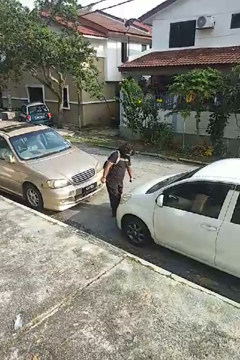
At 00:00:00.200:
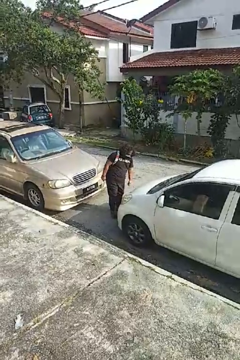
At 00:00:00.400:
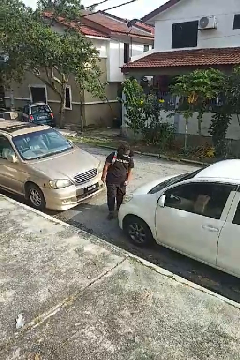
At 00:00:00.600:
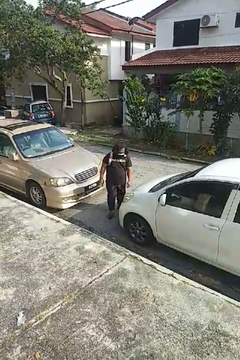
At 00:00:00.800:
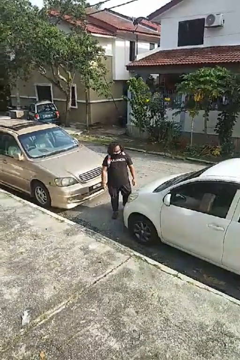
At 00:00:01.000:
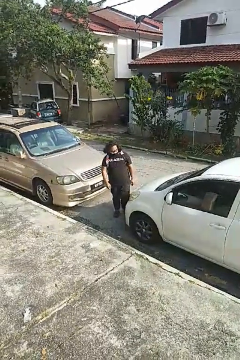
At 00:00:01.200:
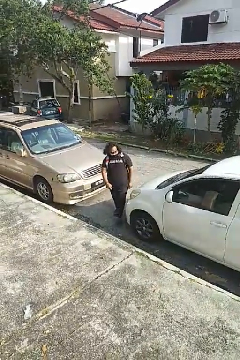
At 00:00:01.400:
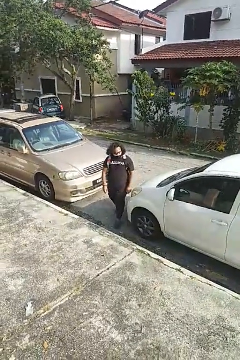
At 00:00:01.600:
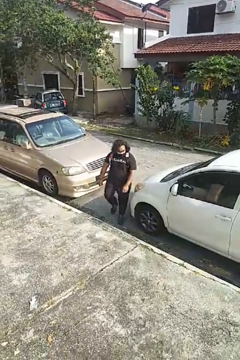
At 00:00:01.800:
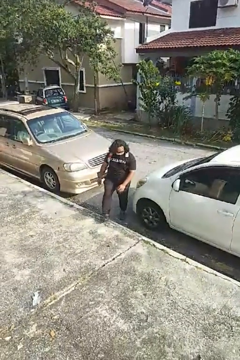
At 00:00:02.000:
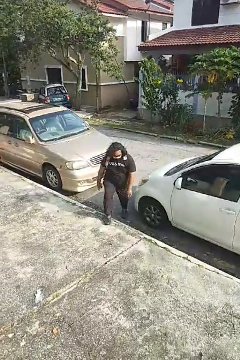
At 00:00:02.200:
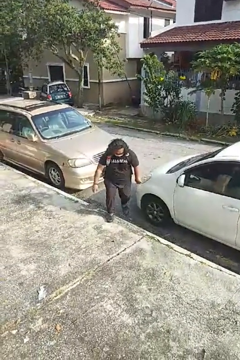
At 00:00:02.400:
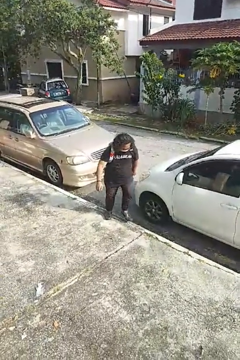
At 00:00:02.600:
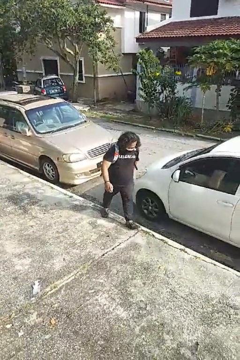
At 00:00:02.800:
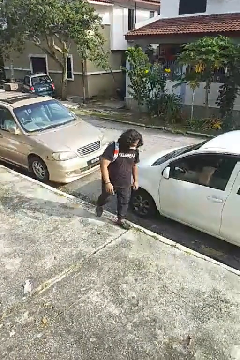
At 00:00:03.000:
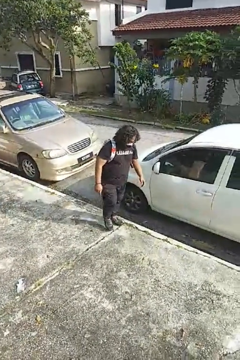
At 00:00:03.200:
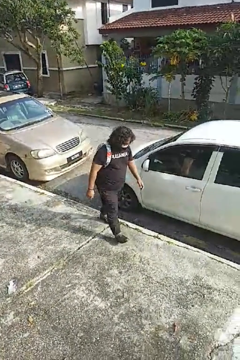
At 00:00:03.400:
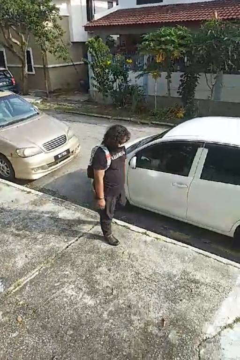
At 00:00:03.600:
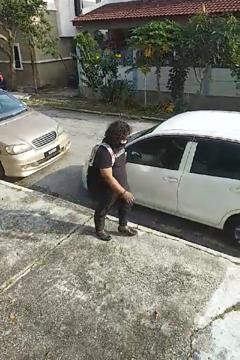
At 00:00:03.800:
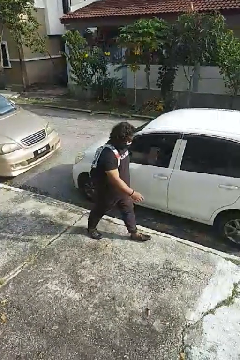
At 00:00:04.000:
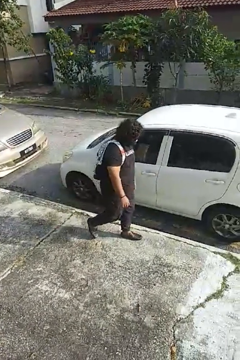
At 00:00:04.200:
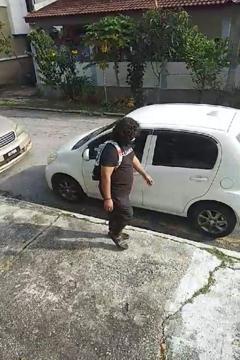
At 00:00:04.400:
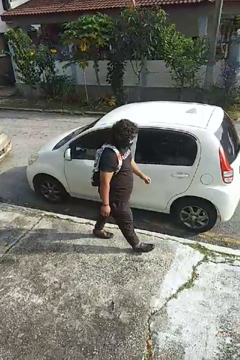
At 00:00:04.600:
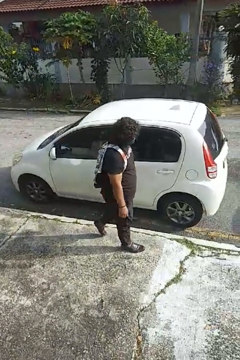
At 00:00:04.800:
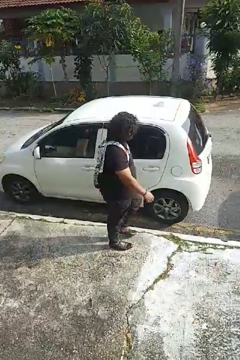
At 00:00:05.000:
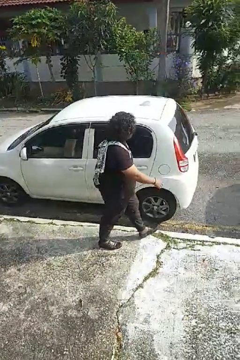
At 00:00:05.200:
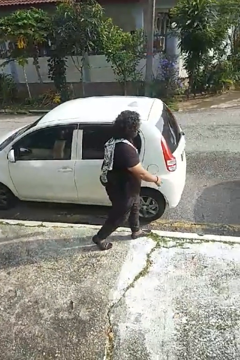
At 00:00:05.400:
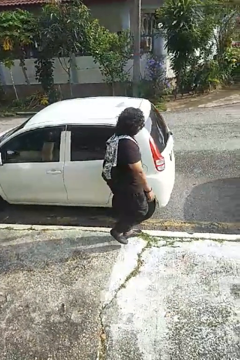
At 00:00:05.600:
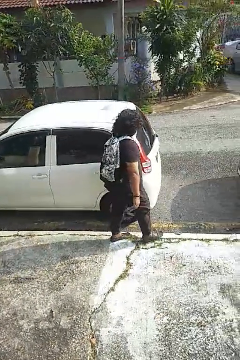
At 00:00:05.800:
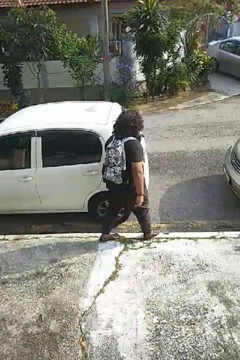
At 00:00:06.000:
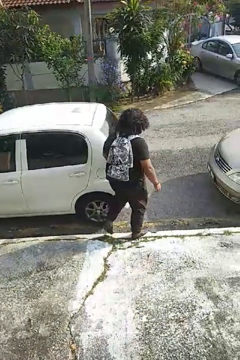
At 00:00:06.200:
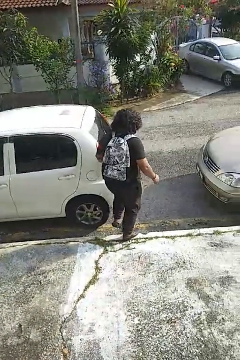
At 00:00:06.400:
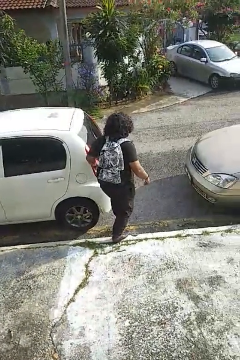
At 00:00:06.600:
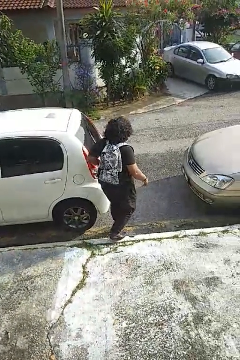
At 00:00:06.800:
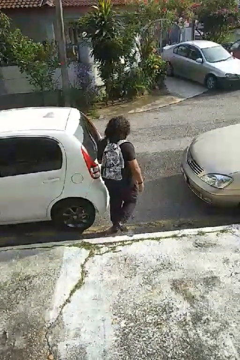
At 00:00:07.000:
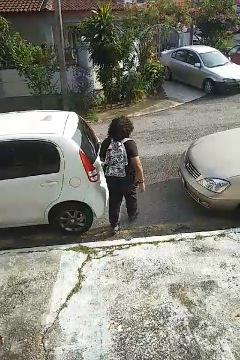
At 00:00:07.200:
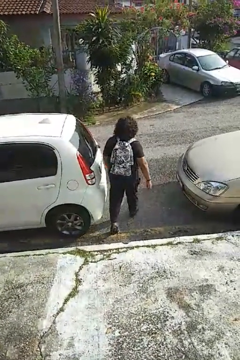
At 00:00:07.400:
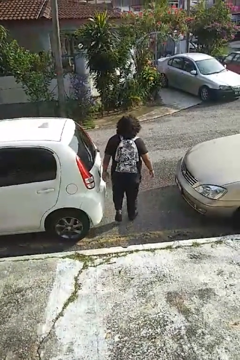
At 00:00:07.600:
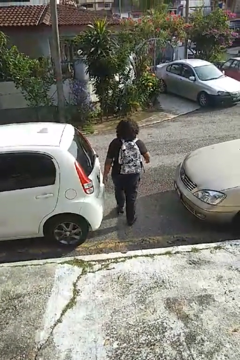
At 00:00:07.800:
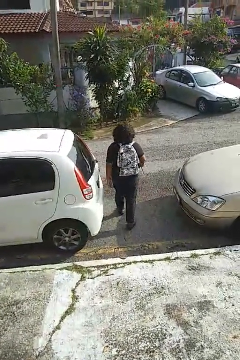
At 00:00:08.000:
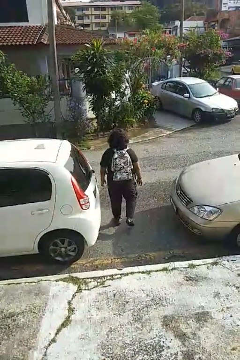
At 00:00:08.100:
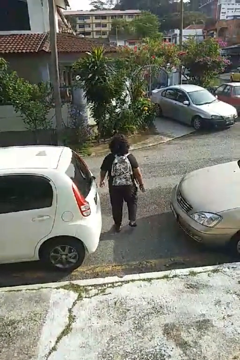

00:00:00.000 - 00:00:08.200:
person walks around car

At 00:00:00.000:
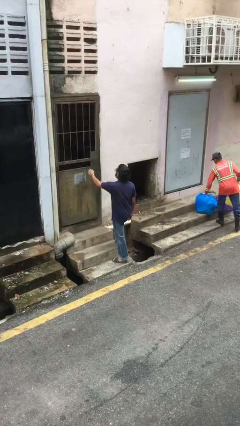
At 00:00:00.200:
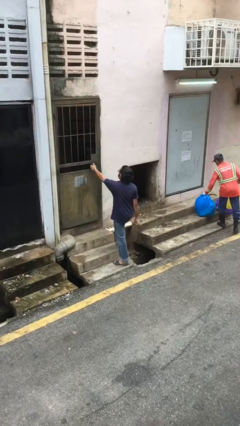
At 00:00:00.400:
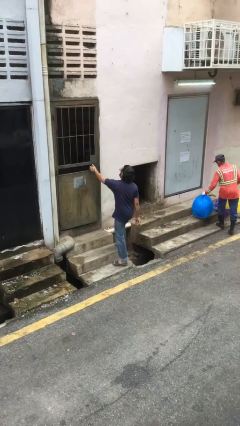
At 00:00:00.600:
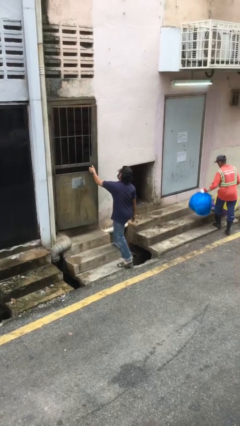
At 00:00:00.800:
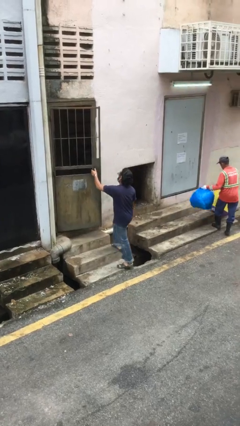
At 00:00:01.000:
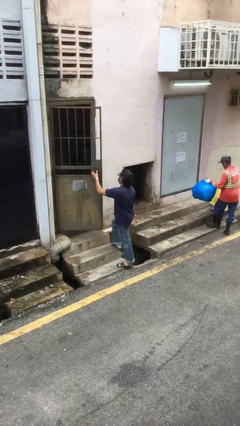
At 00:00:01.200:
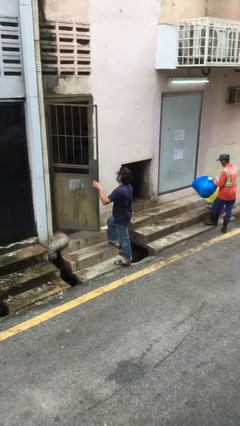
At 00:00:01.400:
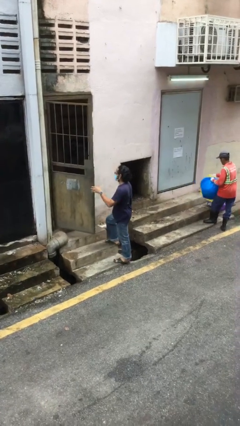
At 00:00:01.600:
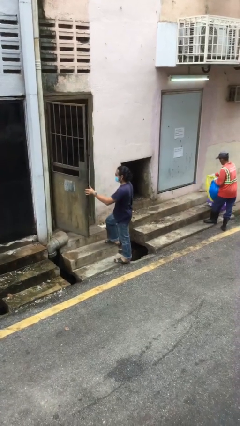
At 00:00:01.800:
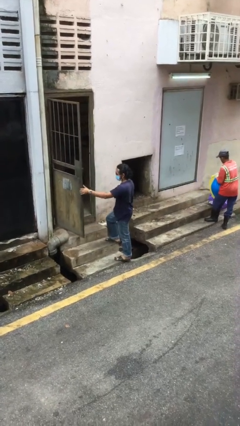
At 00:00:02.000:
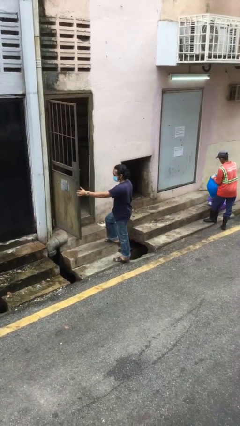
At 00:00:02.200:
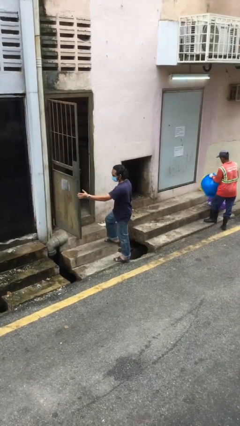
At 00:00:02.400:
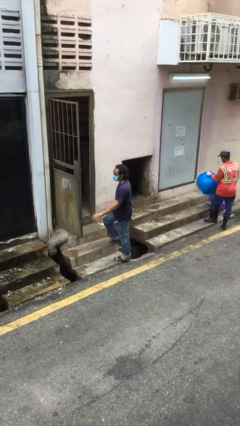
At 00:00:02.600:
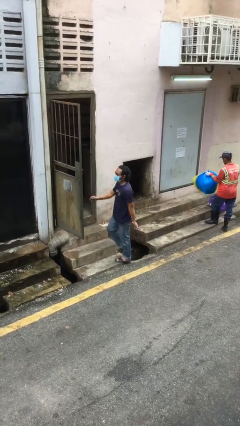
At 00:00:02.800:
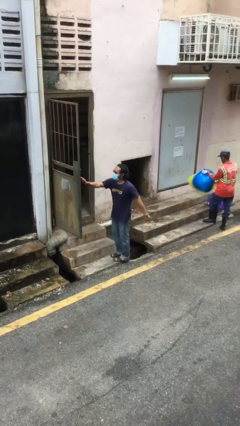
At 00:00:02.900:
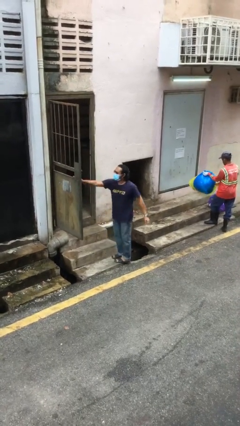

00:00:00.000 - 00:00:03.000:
person opens facility door

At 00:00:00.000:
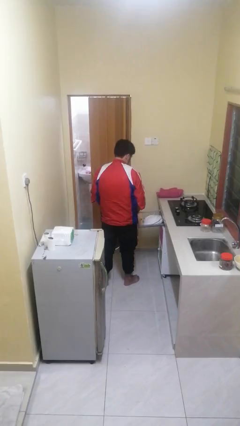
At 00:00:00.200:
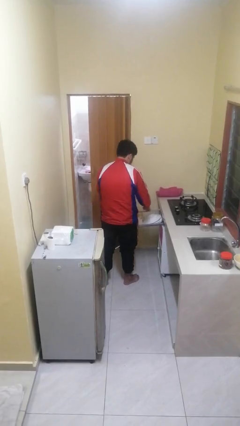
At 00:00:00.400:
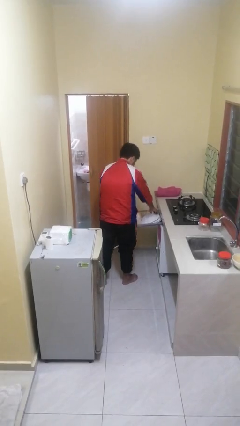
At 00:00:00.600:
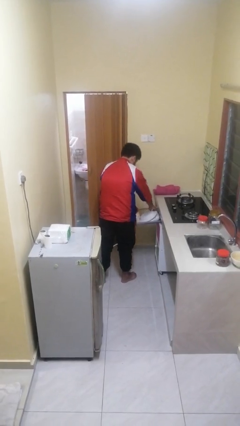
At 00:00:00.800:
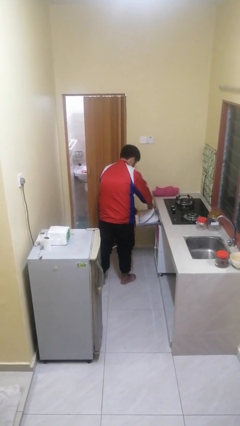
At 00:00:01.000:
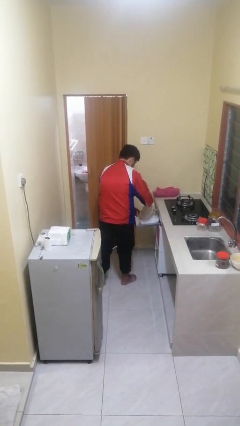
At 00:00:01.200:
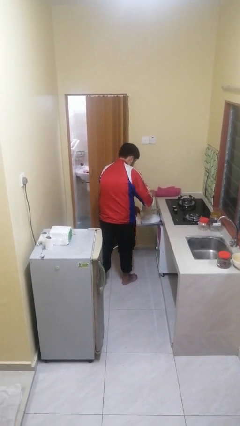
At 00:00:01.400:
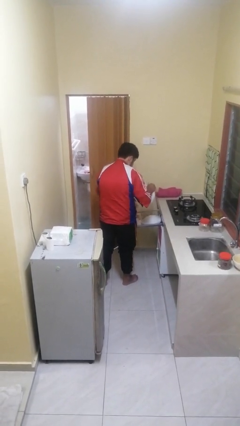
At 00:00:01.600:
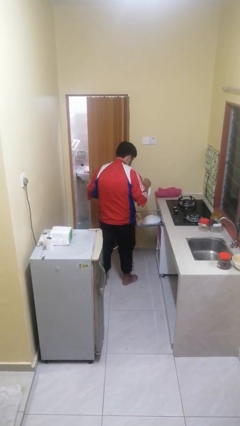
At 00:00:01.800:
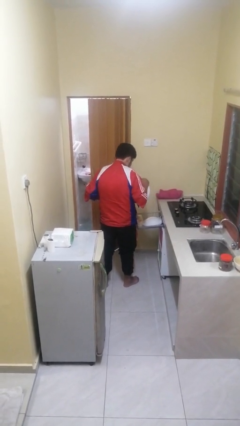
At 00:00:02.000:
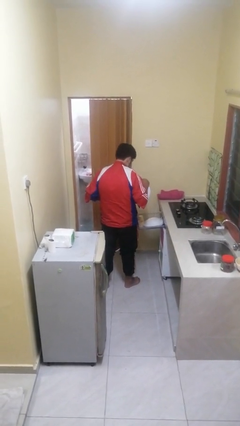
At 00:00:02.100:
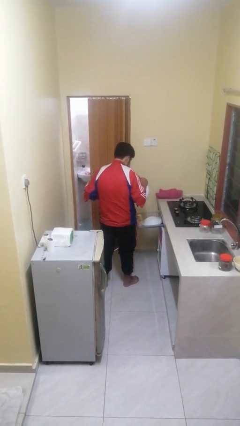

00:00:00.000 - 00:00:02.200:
person takes object from kitchen drawer

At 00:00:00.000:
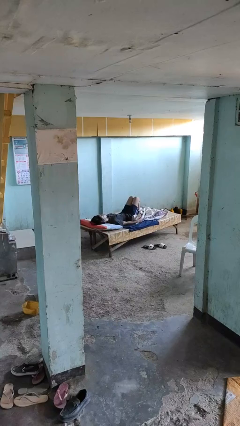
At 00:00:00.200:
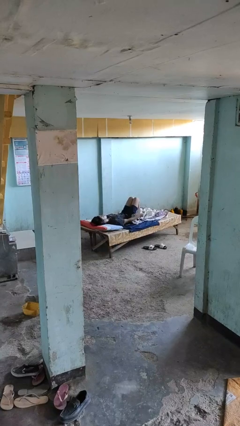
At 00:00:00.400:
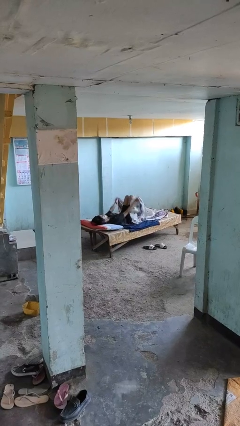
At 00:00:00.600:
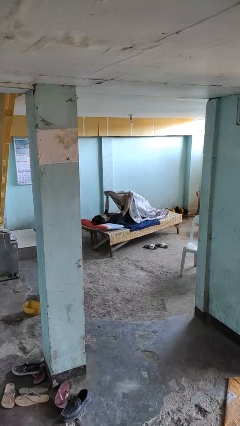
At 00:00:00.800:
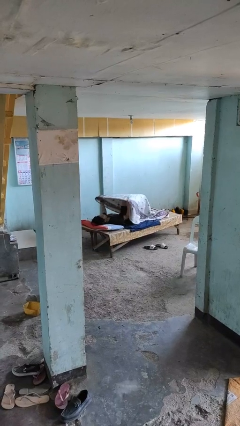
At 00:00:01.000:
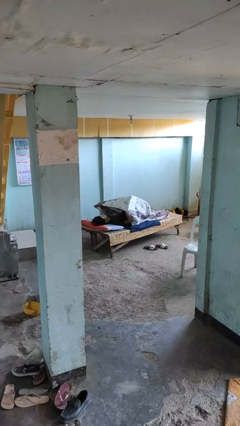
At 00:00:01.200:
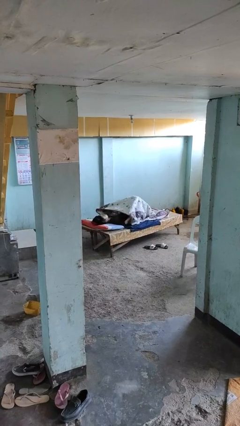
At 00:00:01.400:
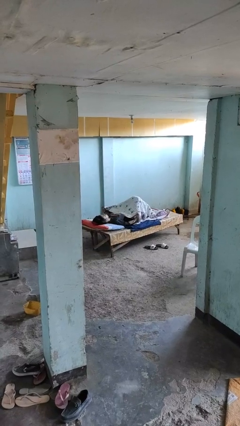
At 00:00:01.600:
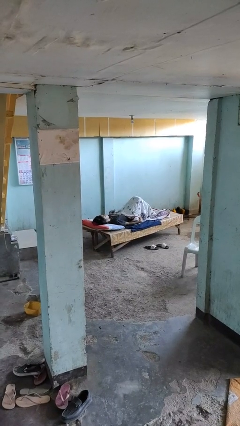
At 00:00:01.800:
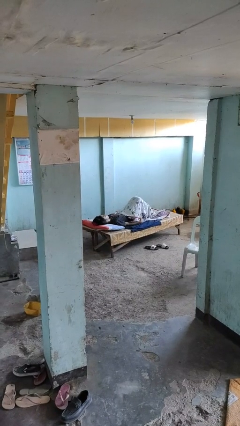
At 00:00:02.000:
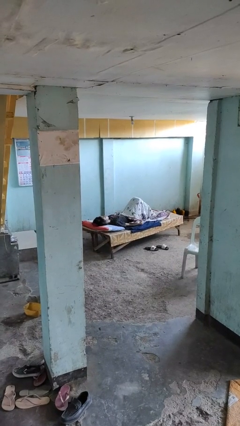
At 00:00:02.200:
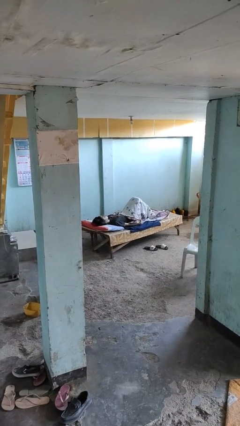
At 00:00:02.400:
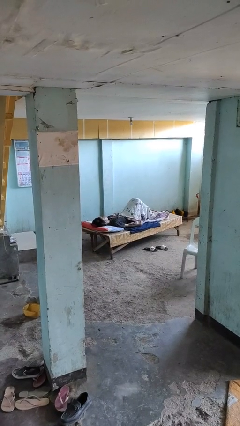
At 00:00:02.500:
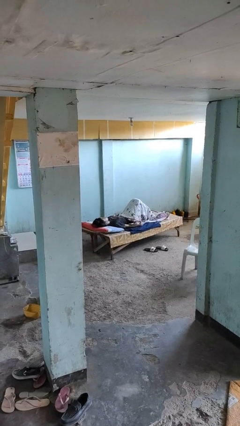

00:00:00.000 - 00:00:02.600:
person covers with bedsheets

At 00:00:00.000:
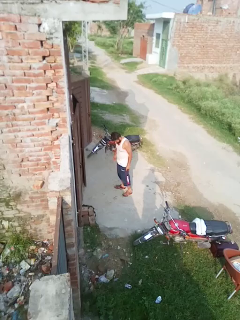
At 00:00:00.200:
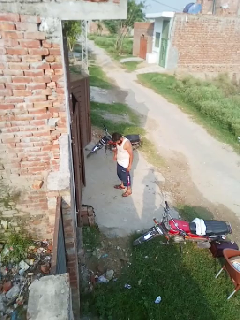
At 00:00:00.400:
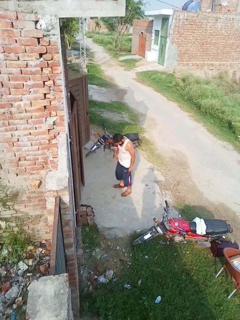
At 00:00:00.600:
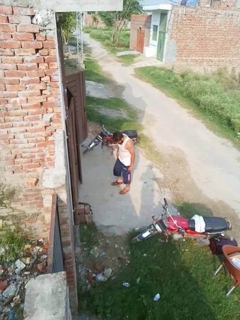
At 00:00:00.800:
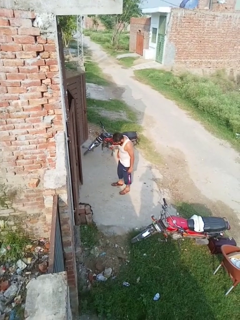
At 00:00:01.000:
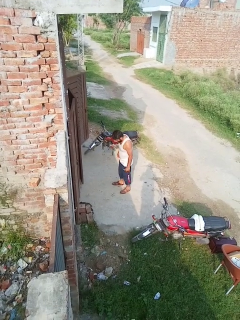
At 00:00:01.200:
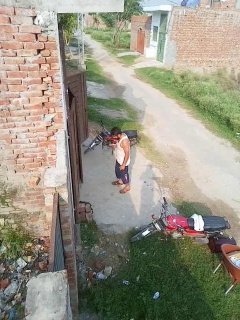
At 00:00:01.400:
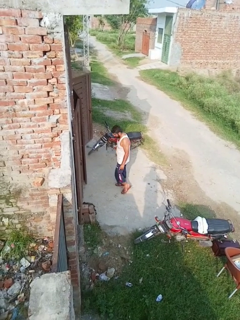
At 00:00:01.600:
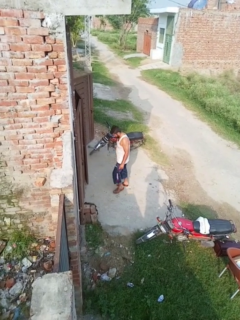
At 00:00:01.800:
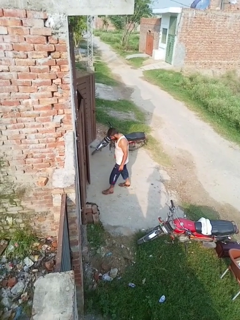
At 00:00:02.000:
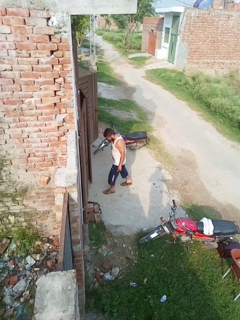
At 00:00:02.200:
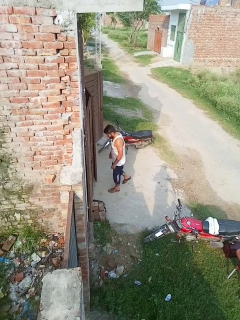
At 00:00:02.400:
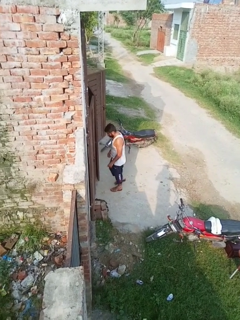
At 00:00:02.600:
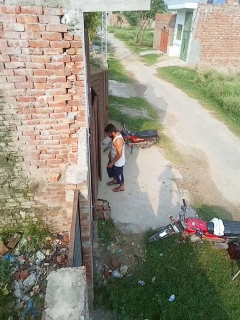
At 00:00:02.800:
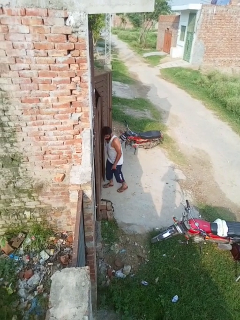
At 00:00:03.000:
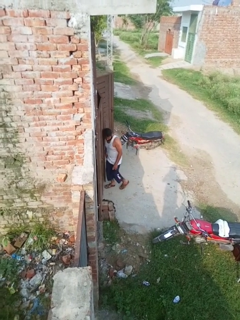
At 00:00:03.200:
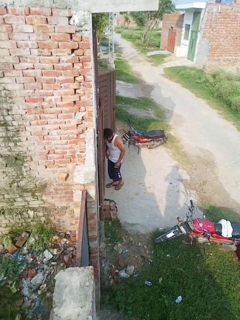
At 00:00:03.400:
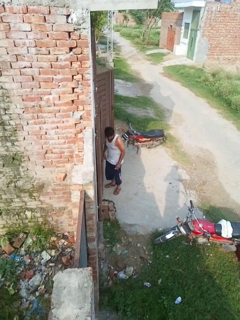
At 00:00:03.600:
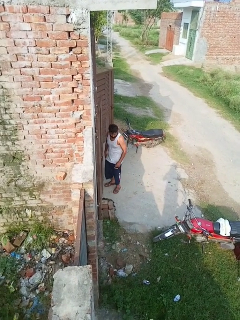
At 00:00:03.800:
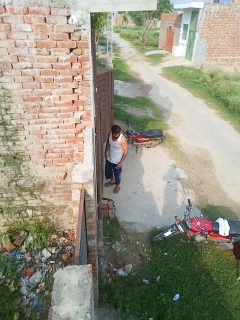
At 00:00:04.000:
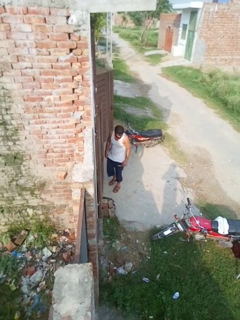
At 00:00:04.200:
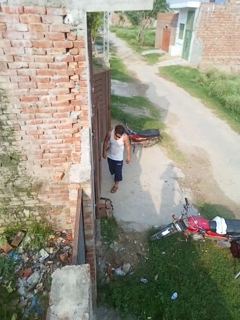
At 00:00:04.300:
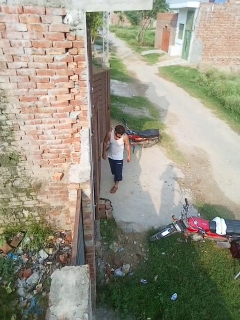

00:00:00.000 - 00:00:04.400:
person bumps into wall
